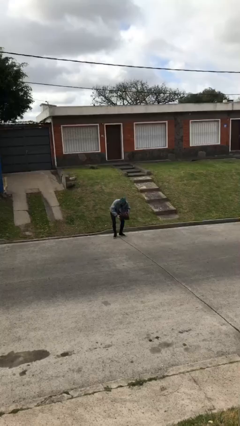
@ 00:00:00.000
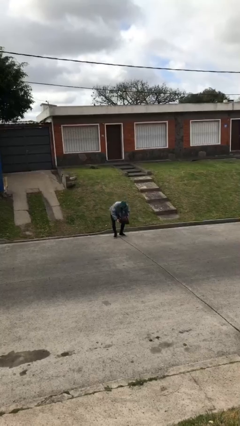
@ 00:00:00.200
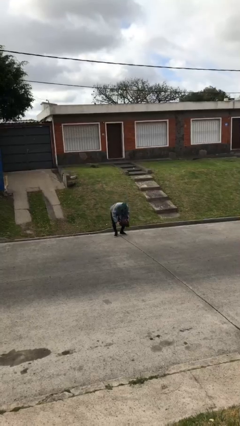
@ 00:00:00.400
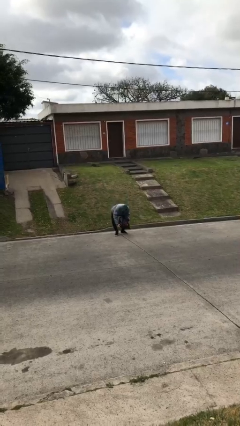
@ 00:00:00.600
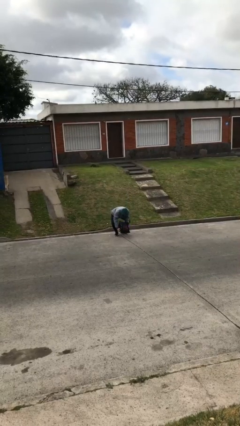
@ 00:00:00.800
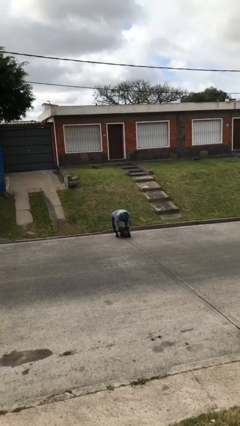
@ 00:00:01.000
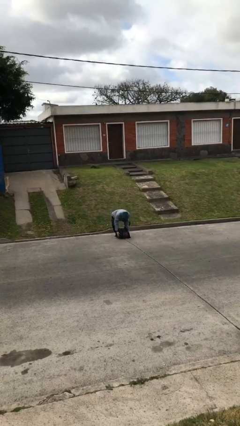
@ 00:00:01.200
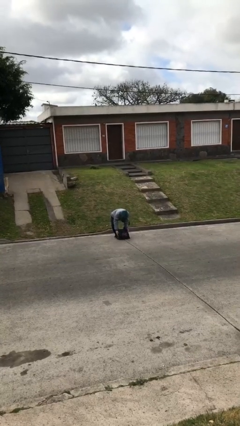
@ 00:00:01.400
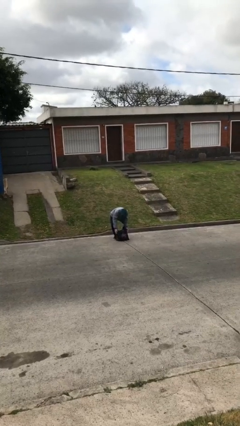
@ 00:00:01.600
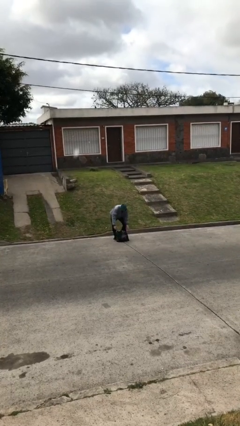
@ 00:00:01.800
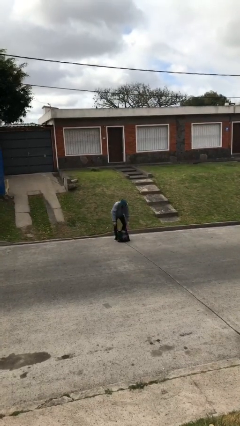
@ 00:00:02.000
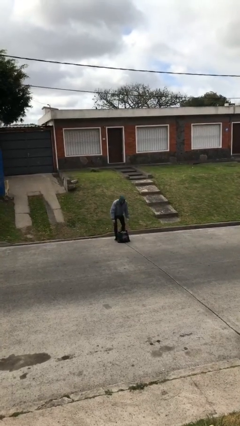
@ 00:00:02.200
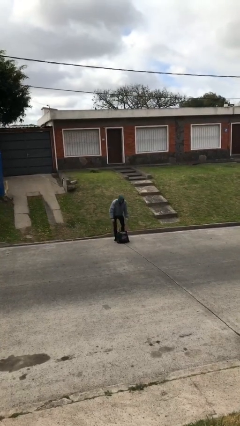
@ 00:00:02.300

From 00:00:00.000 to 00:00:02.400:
person puts down object on floor

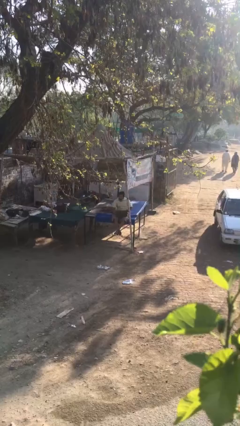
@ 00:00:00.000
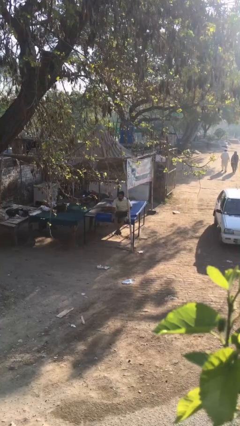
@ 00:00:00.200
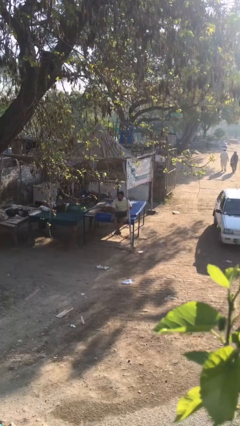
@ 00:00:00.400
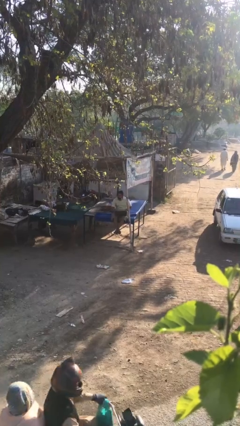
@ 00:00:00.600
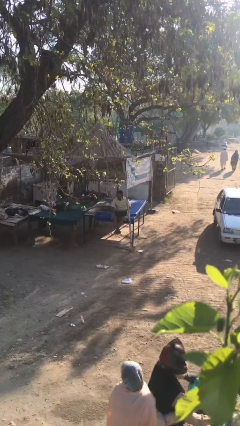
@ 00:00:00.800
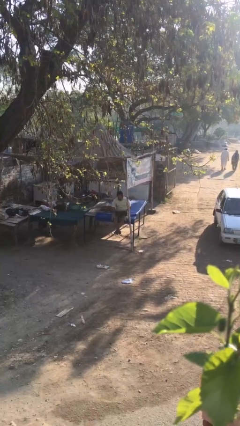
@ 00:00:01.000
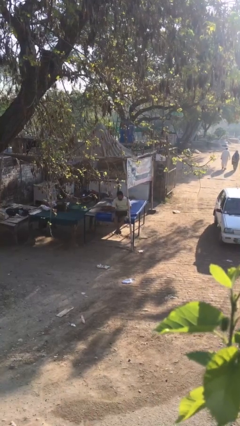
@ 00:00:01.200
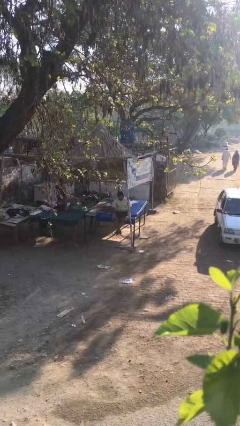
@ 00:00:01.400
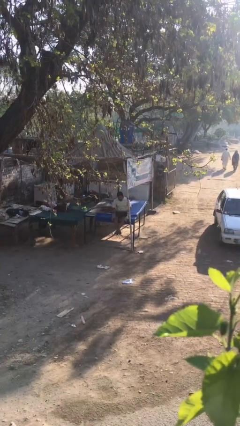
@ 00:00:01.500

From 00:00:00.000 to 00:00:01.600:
person interacts with laptop

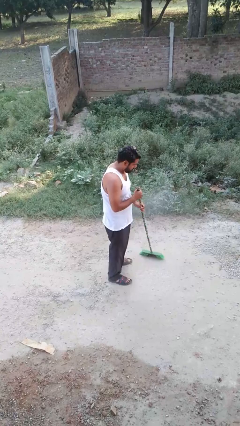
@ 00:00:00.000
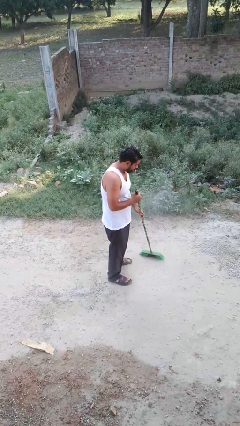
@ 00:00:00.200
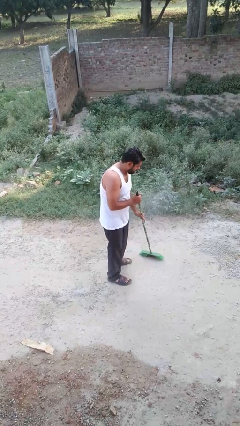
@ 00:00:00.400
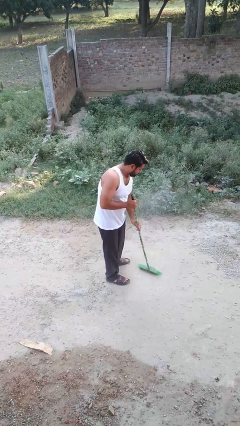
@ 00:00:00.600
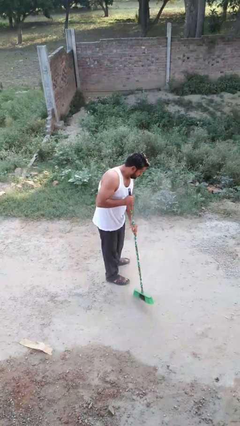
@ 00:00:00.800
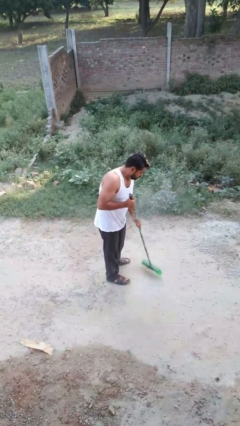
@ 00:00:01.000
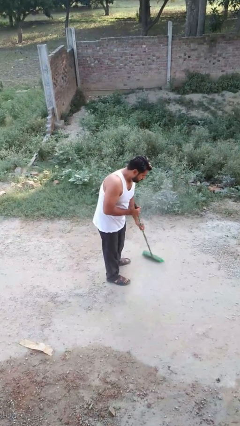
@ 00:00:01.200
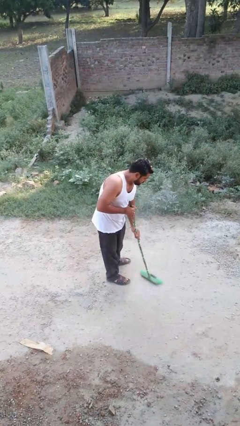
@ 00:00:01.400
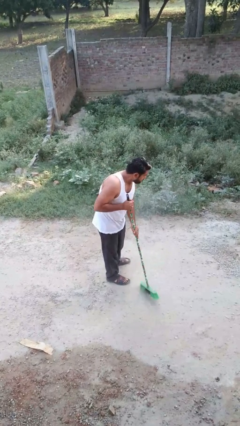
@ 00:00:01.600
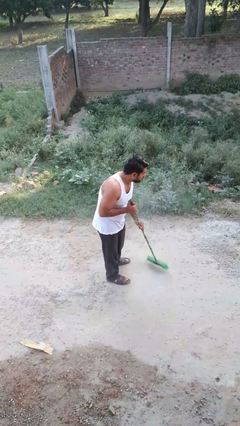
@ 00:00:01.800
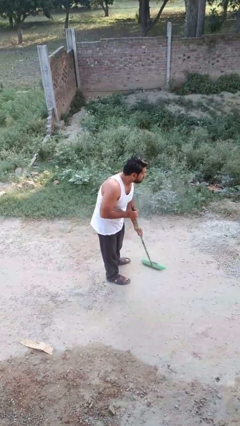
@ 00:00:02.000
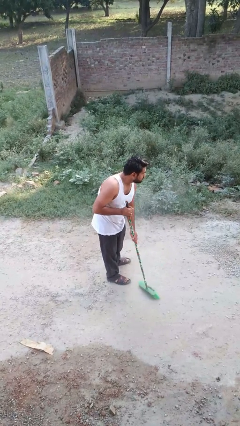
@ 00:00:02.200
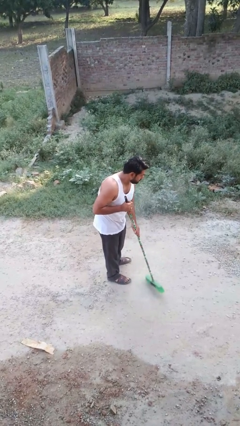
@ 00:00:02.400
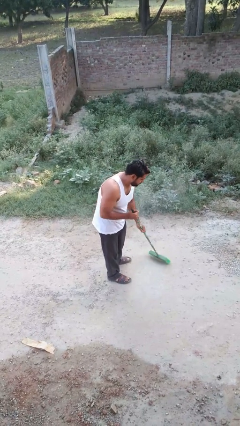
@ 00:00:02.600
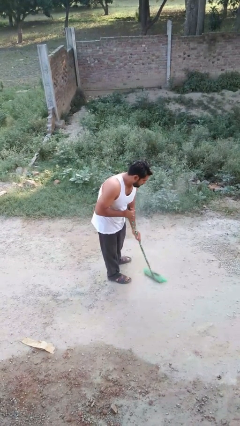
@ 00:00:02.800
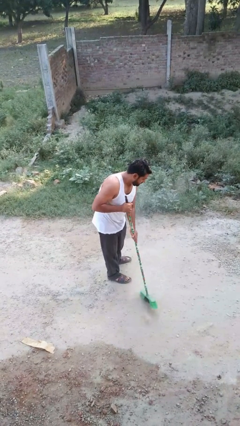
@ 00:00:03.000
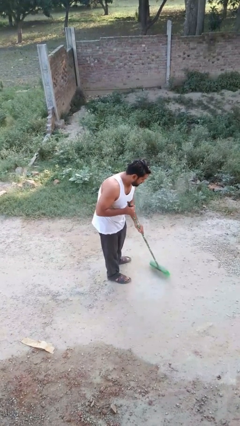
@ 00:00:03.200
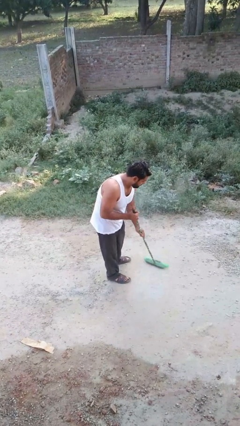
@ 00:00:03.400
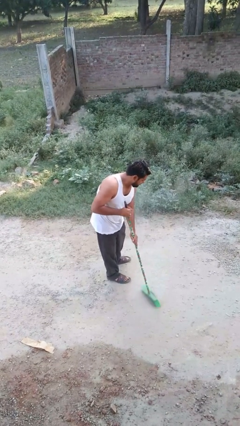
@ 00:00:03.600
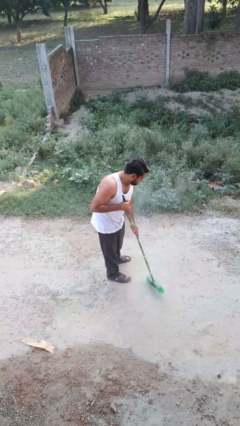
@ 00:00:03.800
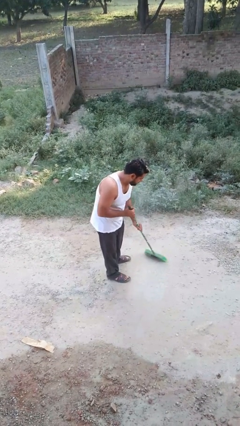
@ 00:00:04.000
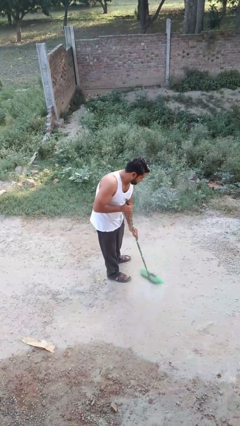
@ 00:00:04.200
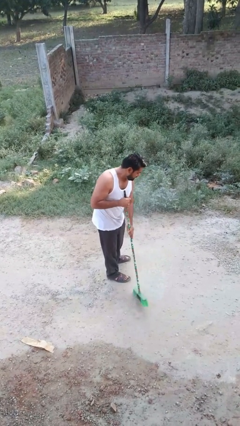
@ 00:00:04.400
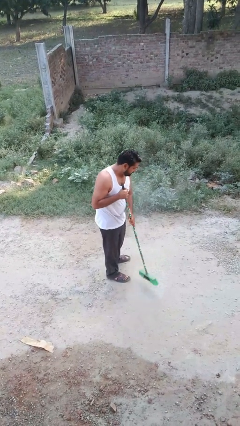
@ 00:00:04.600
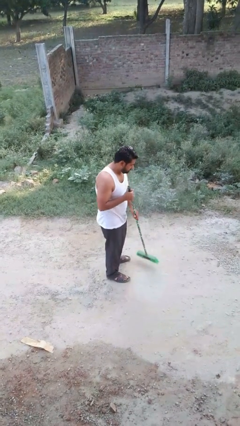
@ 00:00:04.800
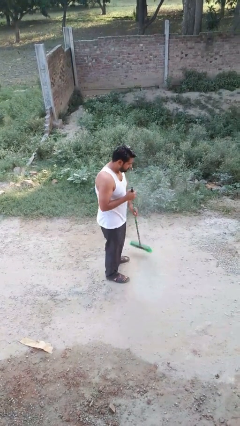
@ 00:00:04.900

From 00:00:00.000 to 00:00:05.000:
person sweeps floor

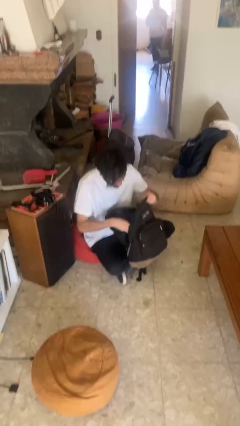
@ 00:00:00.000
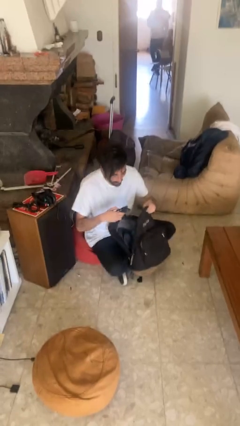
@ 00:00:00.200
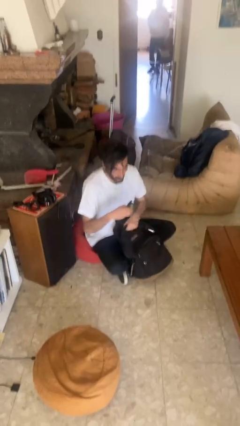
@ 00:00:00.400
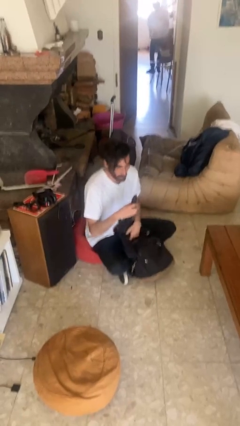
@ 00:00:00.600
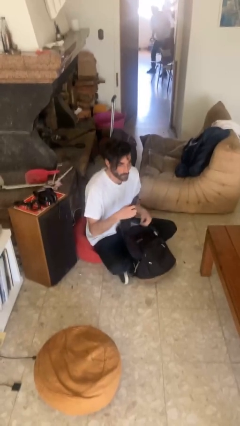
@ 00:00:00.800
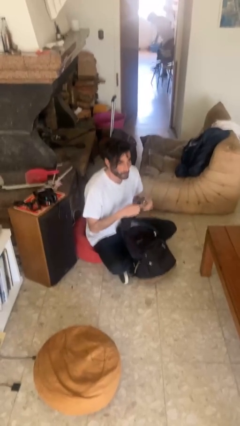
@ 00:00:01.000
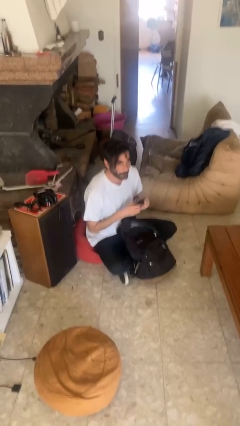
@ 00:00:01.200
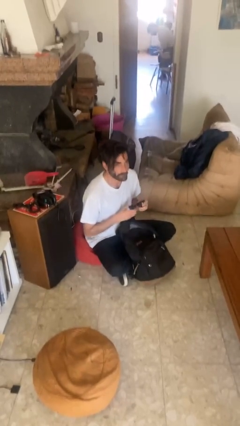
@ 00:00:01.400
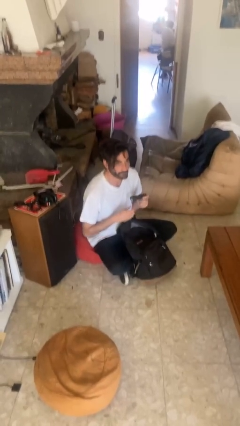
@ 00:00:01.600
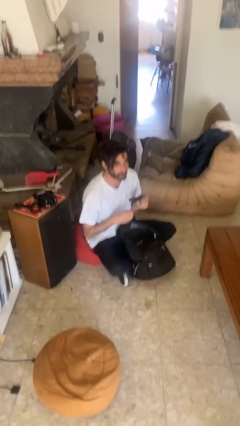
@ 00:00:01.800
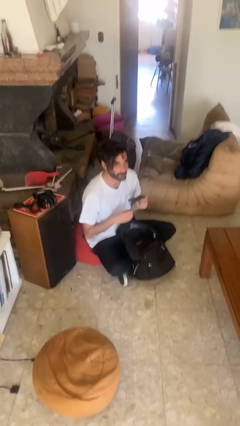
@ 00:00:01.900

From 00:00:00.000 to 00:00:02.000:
person takes object from backpack

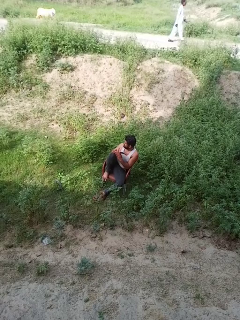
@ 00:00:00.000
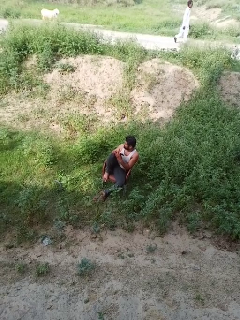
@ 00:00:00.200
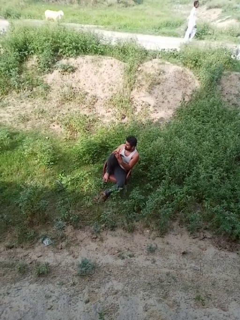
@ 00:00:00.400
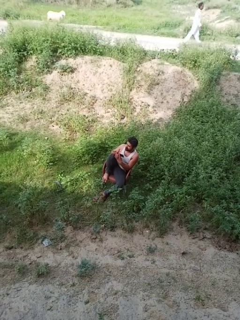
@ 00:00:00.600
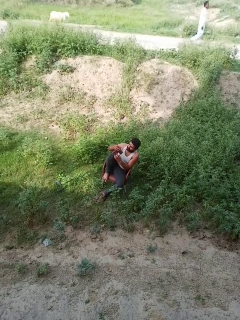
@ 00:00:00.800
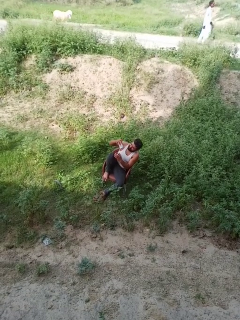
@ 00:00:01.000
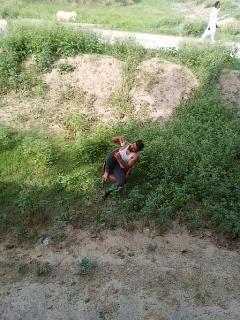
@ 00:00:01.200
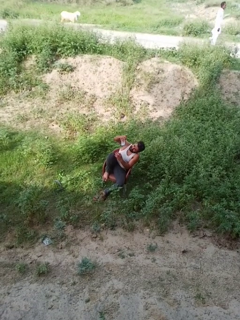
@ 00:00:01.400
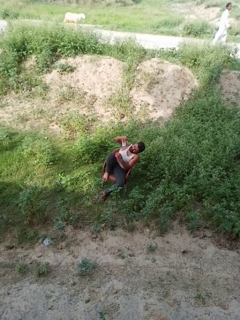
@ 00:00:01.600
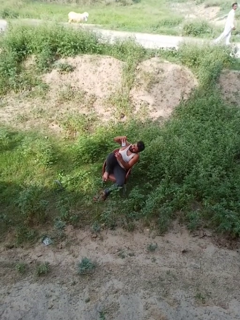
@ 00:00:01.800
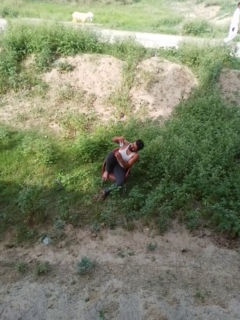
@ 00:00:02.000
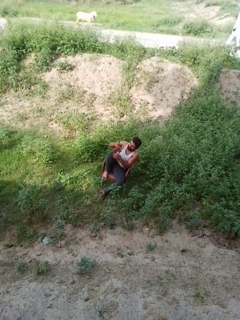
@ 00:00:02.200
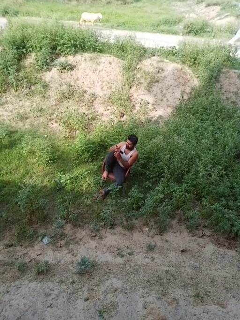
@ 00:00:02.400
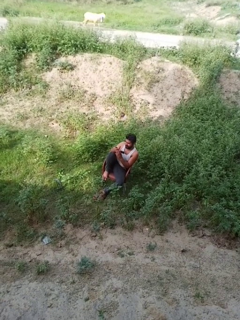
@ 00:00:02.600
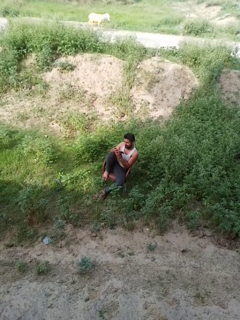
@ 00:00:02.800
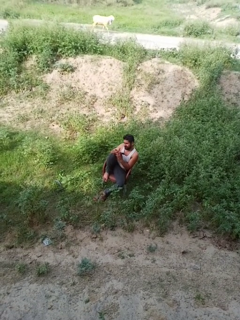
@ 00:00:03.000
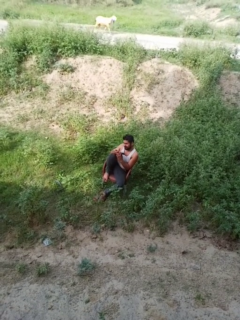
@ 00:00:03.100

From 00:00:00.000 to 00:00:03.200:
person takes selfie

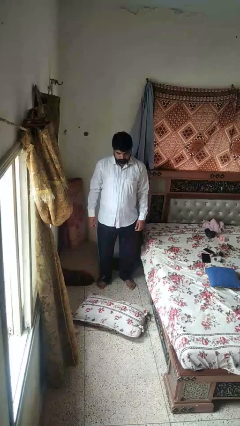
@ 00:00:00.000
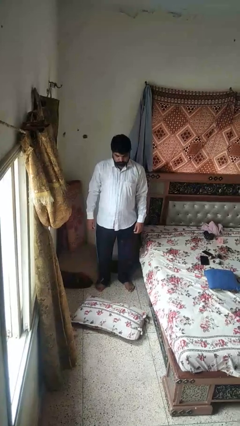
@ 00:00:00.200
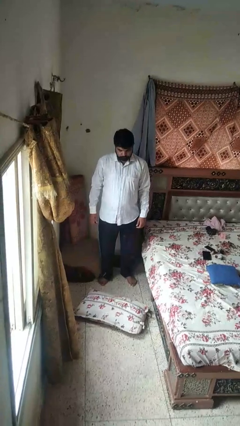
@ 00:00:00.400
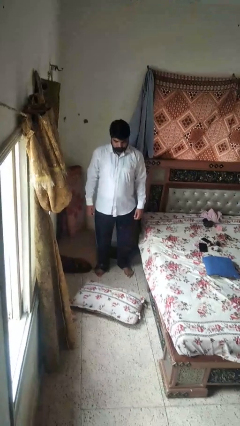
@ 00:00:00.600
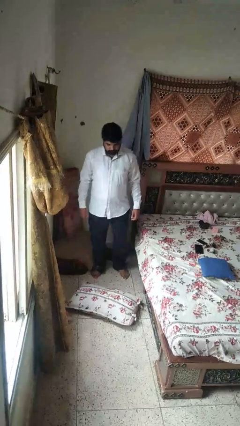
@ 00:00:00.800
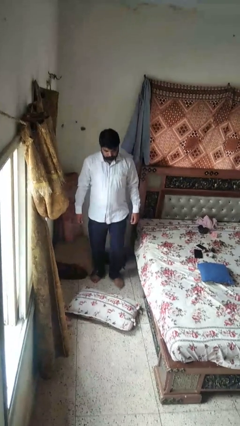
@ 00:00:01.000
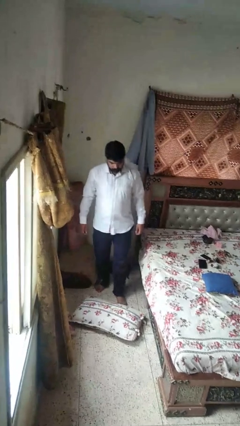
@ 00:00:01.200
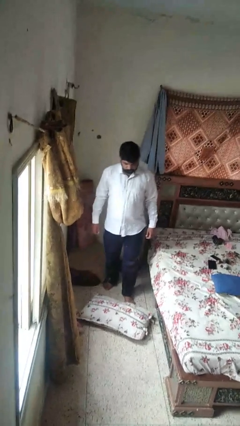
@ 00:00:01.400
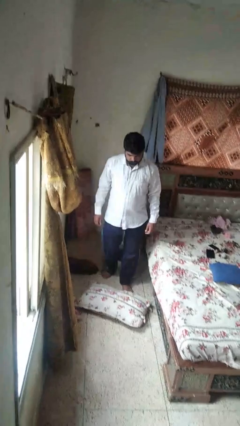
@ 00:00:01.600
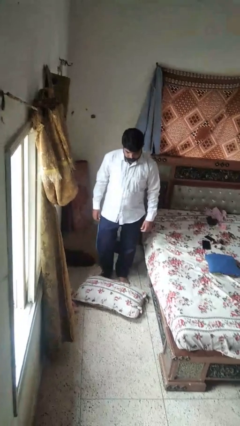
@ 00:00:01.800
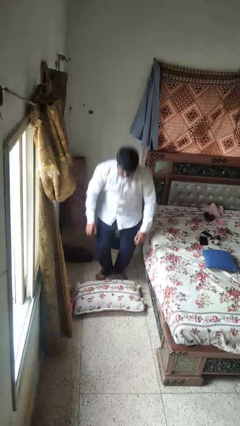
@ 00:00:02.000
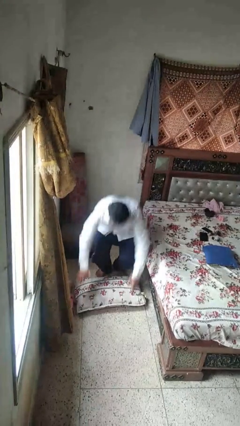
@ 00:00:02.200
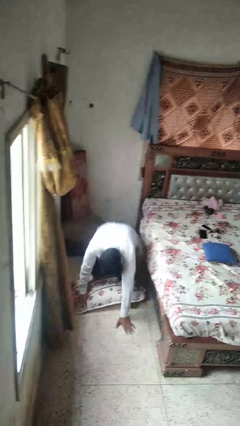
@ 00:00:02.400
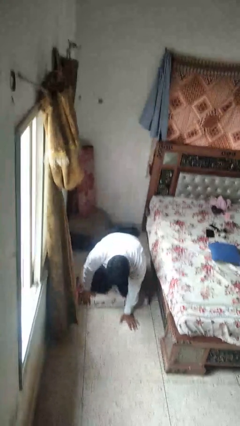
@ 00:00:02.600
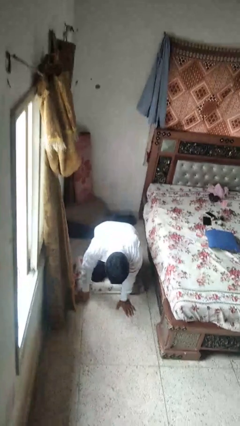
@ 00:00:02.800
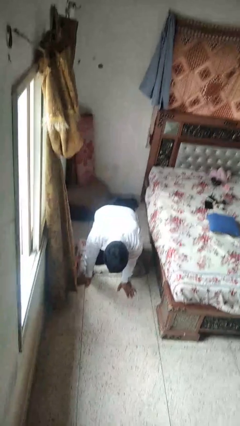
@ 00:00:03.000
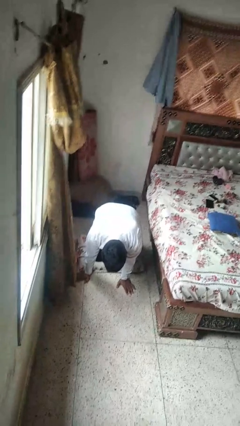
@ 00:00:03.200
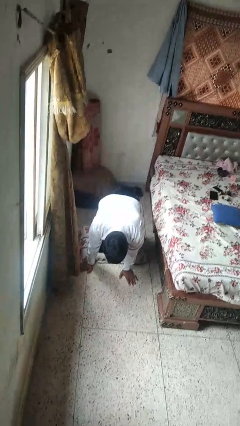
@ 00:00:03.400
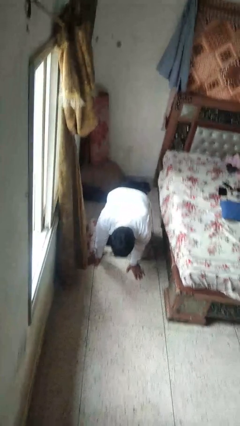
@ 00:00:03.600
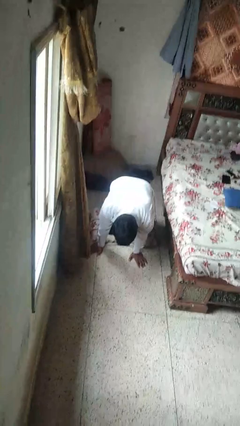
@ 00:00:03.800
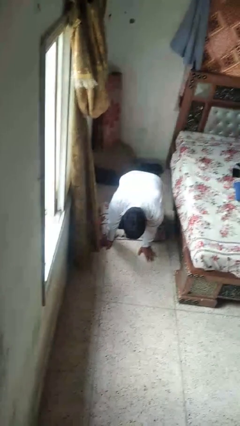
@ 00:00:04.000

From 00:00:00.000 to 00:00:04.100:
person trips on object on floor
